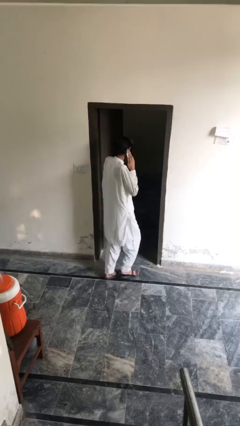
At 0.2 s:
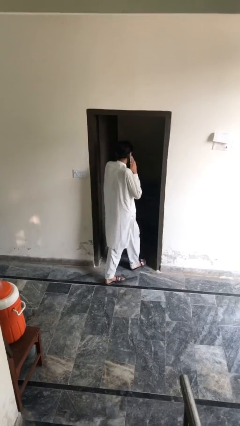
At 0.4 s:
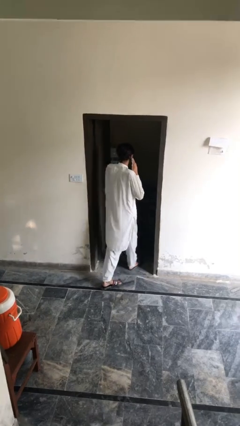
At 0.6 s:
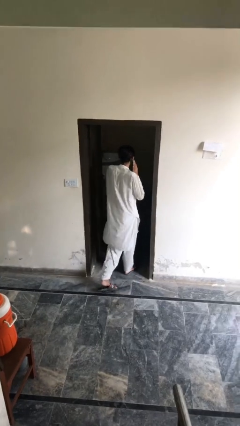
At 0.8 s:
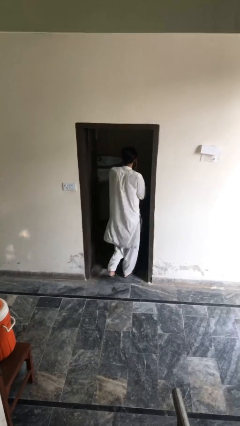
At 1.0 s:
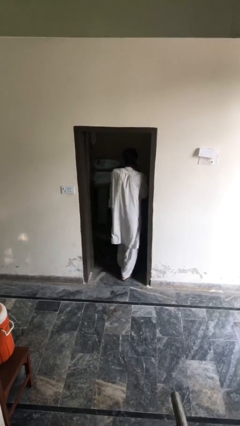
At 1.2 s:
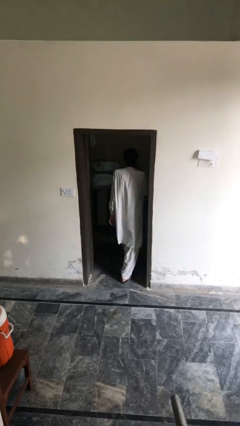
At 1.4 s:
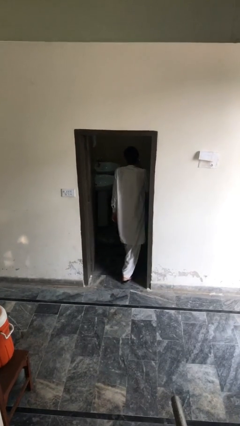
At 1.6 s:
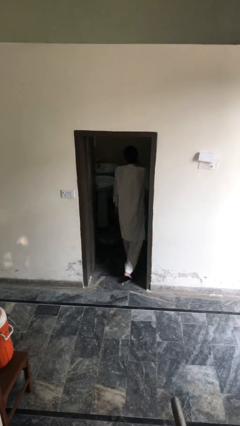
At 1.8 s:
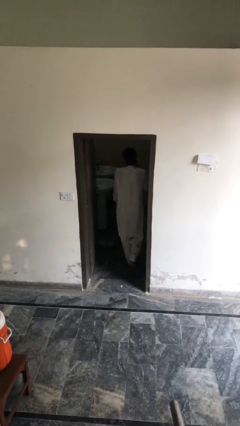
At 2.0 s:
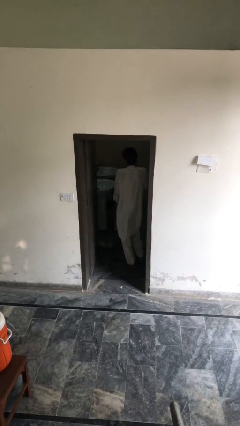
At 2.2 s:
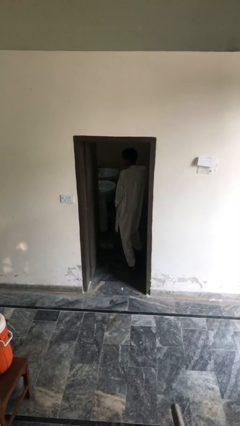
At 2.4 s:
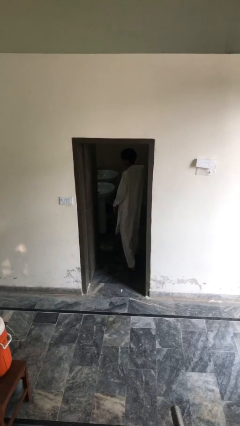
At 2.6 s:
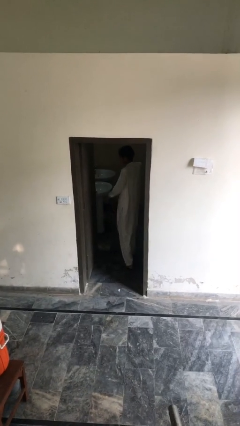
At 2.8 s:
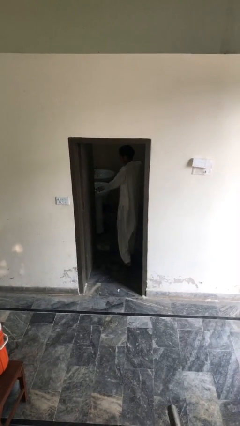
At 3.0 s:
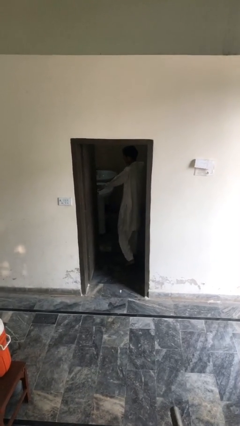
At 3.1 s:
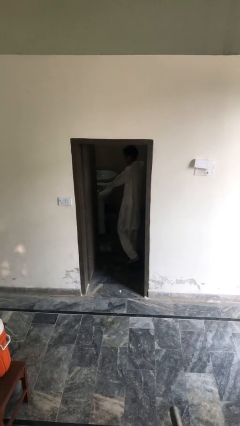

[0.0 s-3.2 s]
person exits scene through structure

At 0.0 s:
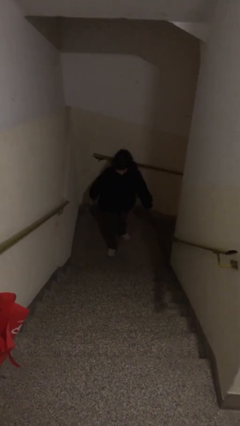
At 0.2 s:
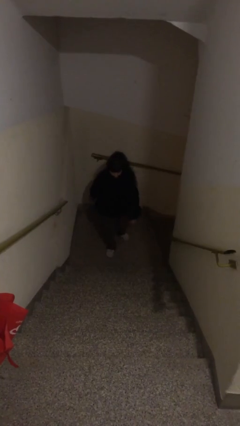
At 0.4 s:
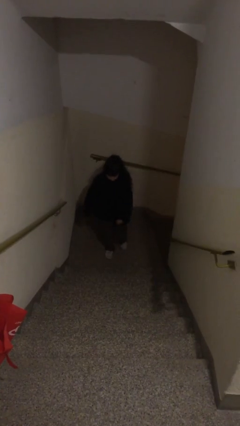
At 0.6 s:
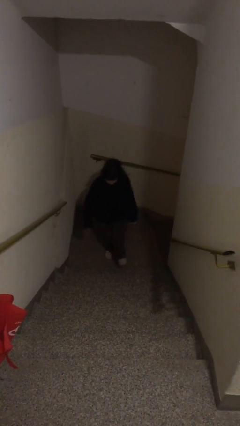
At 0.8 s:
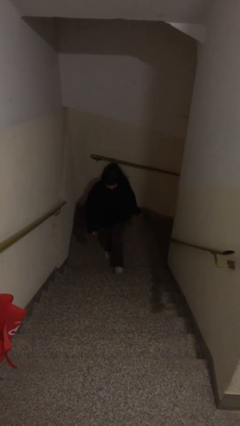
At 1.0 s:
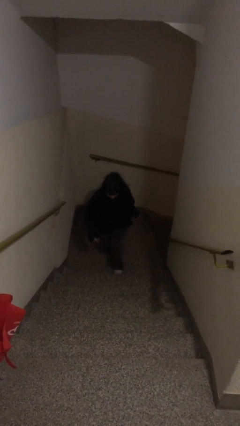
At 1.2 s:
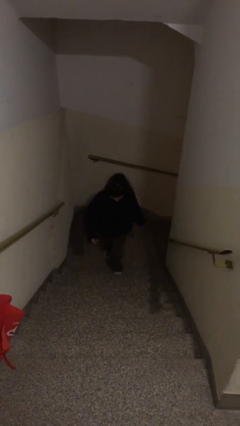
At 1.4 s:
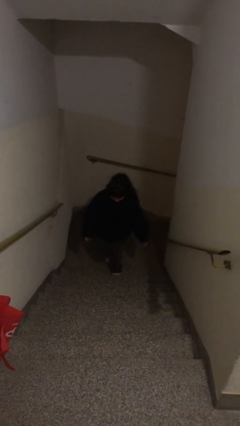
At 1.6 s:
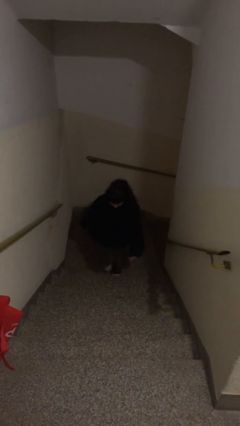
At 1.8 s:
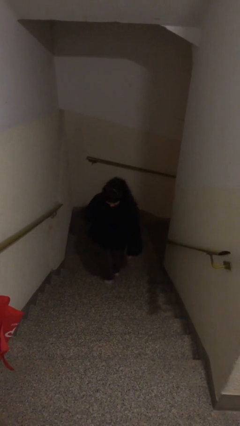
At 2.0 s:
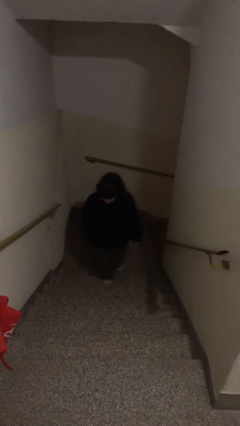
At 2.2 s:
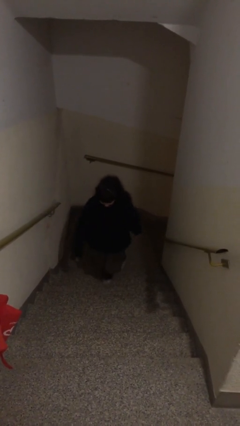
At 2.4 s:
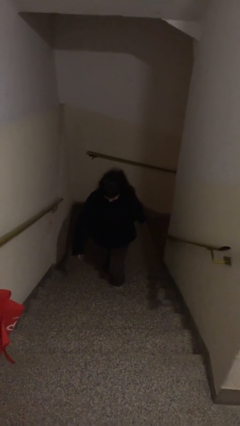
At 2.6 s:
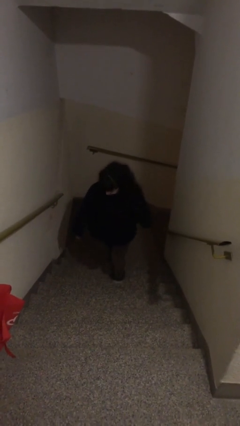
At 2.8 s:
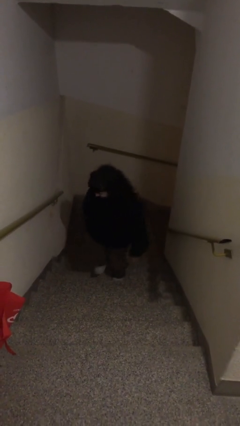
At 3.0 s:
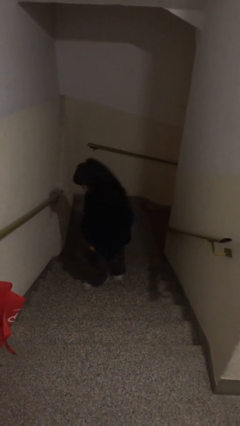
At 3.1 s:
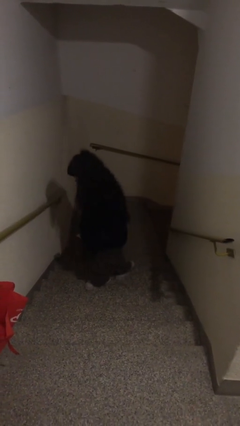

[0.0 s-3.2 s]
person climbs up stairs

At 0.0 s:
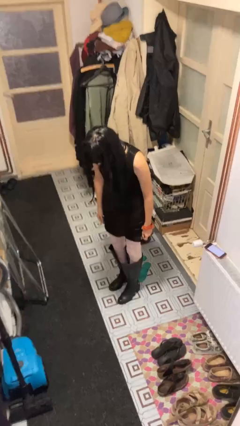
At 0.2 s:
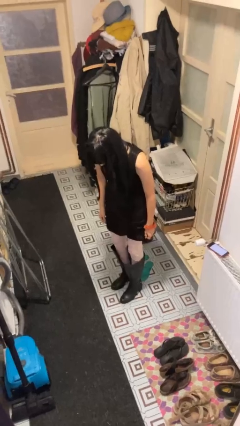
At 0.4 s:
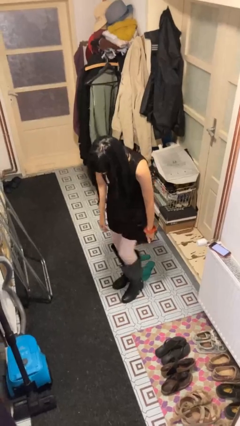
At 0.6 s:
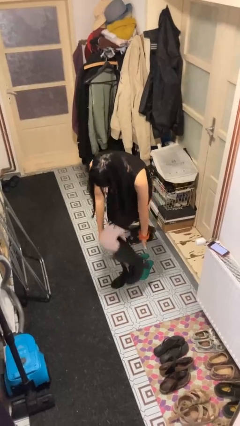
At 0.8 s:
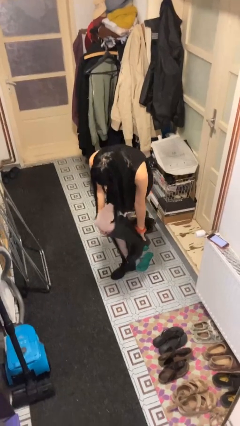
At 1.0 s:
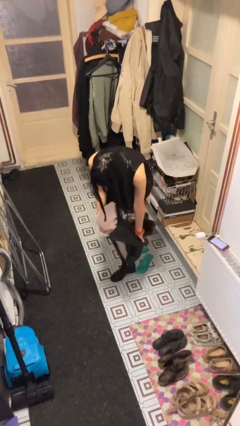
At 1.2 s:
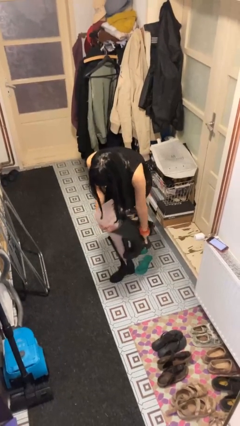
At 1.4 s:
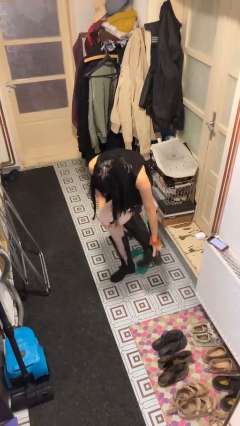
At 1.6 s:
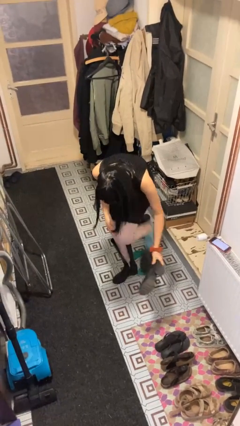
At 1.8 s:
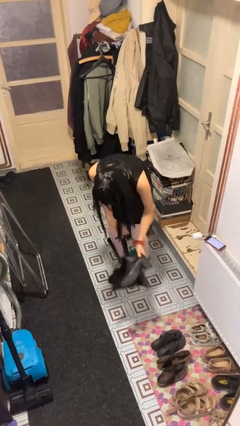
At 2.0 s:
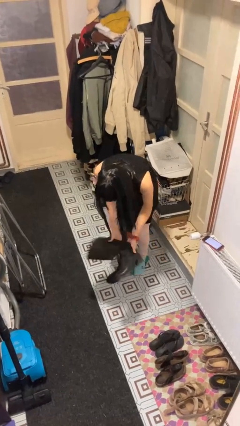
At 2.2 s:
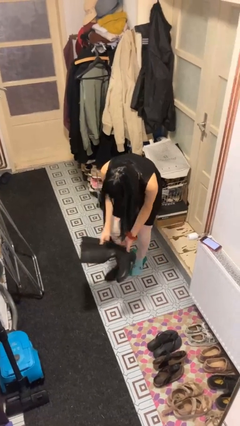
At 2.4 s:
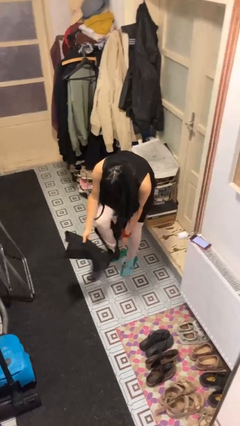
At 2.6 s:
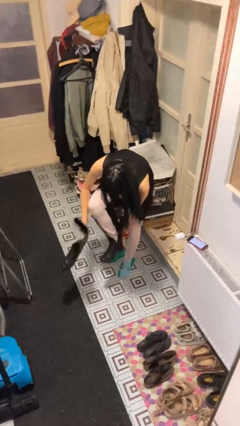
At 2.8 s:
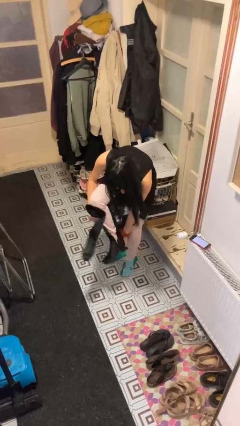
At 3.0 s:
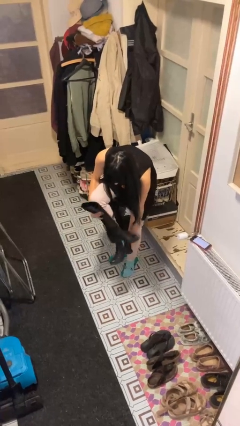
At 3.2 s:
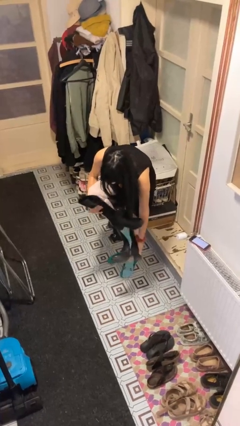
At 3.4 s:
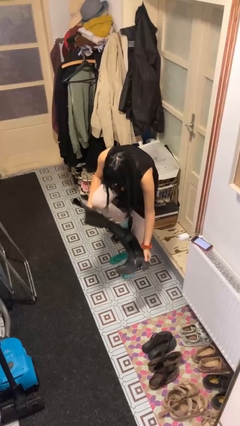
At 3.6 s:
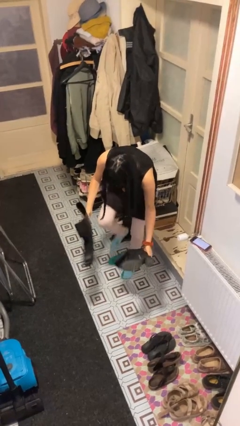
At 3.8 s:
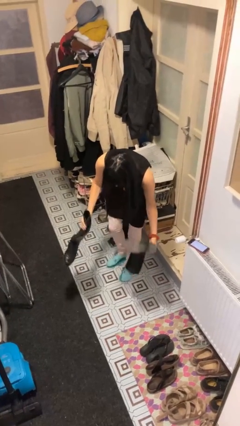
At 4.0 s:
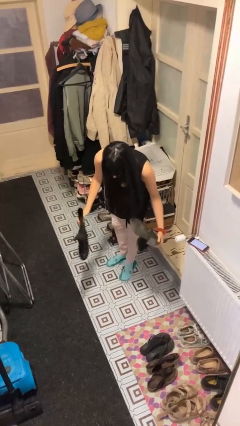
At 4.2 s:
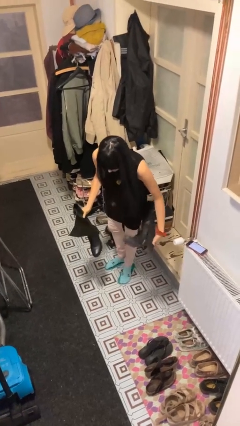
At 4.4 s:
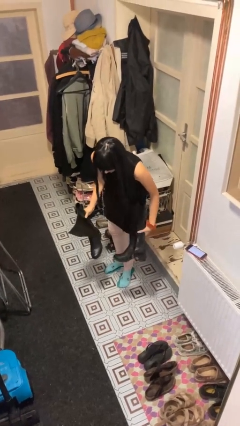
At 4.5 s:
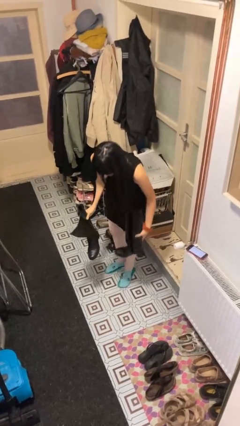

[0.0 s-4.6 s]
person takes off boots

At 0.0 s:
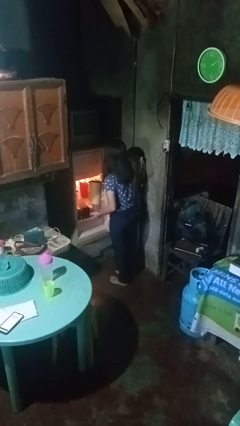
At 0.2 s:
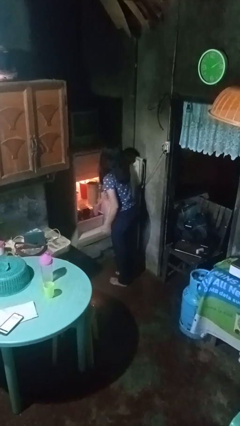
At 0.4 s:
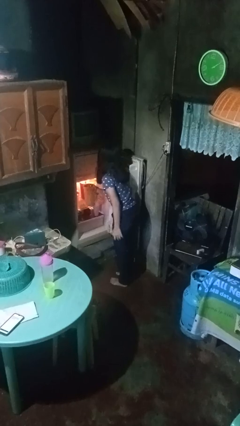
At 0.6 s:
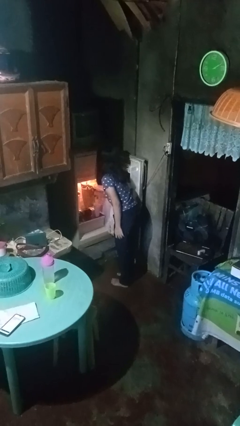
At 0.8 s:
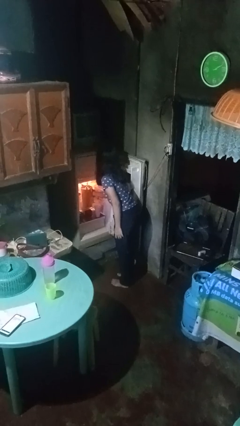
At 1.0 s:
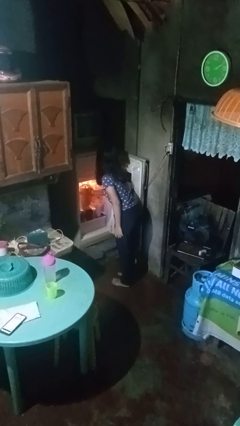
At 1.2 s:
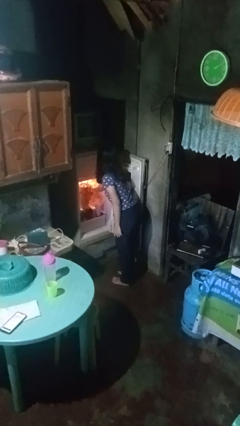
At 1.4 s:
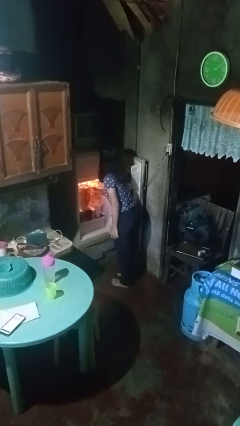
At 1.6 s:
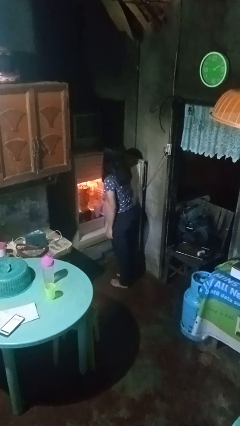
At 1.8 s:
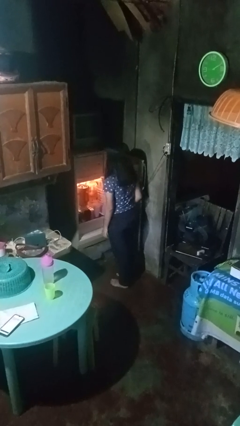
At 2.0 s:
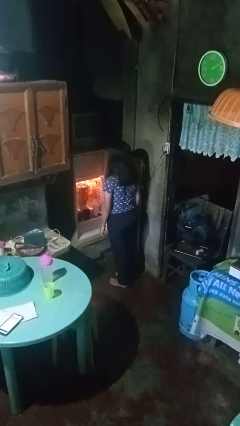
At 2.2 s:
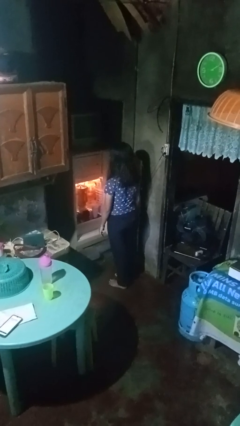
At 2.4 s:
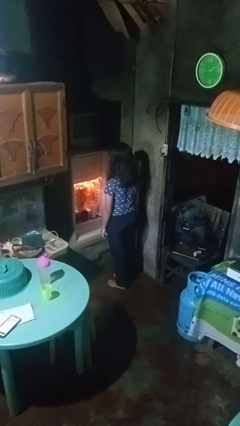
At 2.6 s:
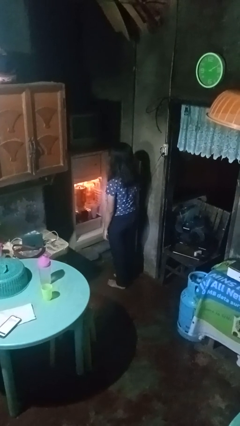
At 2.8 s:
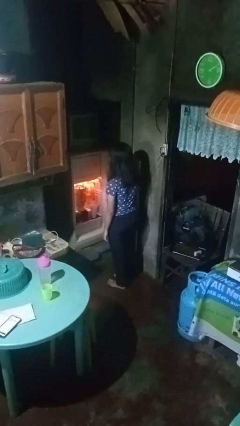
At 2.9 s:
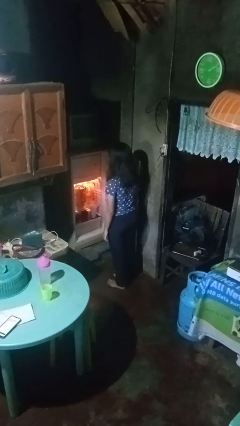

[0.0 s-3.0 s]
person puts object into refrigerator

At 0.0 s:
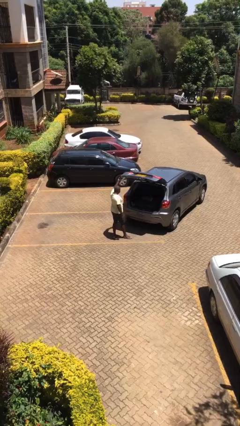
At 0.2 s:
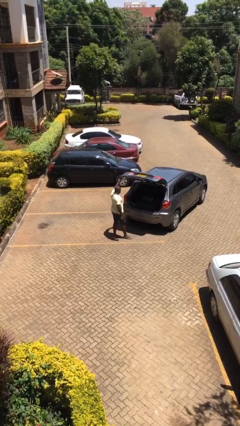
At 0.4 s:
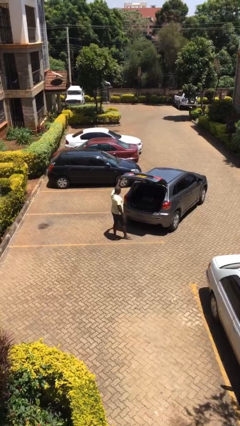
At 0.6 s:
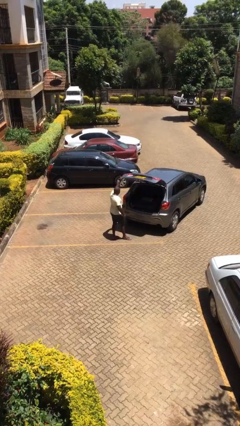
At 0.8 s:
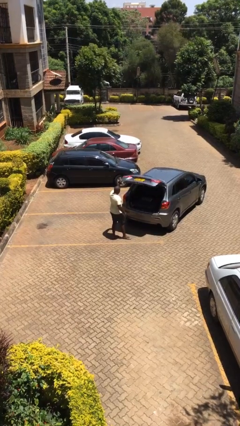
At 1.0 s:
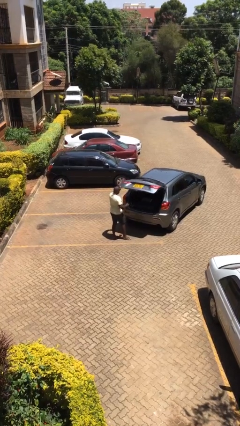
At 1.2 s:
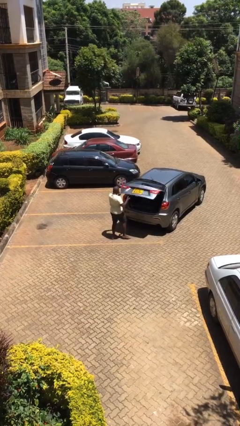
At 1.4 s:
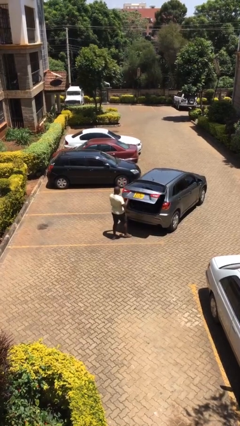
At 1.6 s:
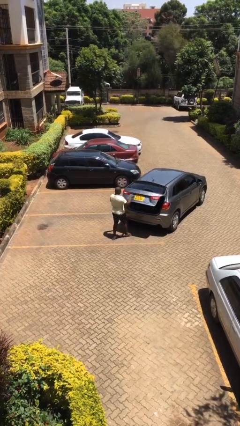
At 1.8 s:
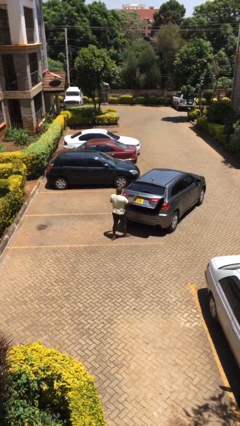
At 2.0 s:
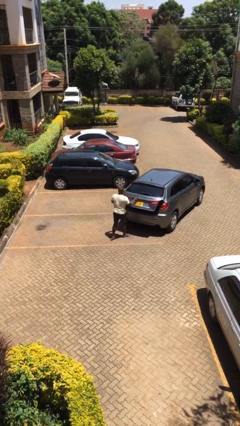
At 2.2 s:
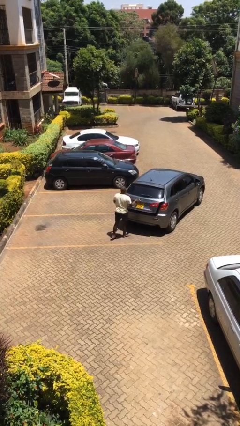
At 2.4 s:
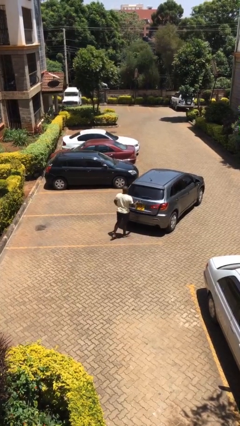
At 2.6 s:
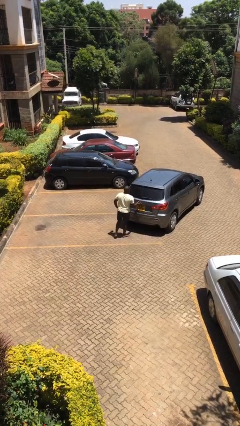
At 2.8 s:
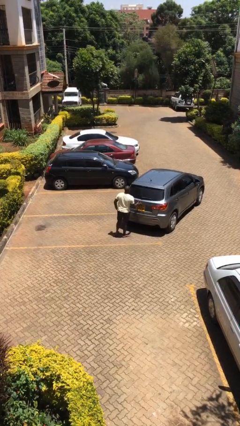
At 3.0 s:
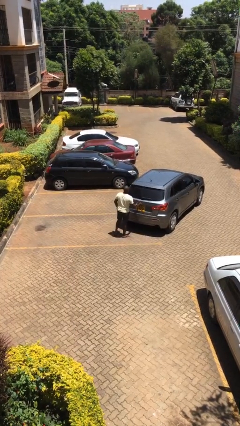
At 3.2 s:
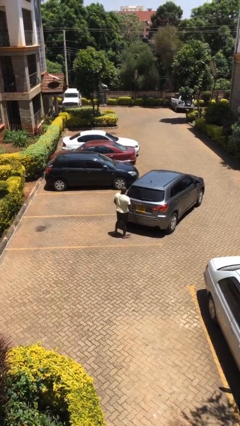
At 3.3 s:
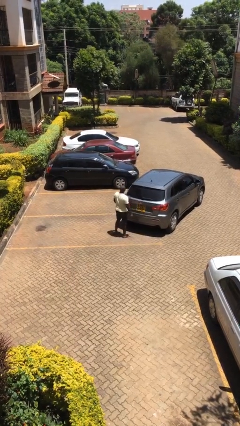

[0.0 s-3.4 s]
person closes car trunk
